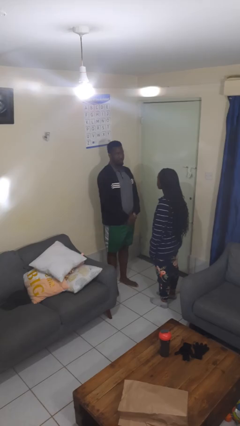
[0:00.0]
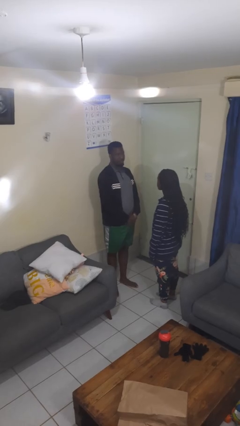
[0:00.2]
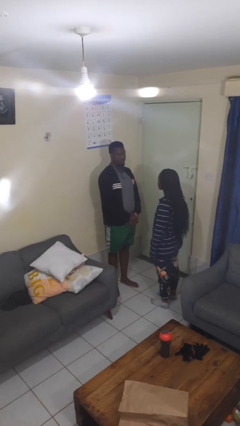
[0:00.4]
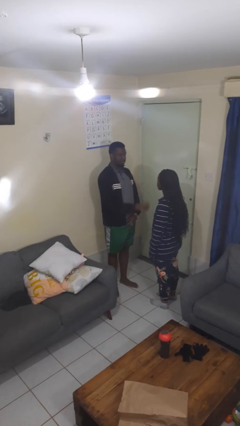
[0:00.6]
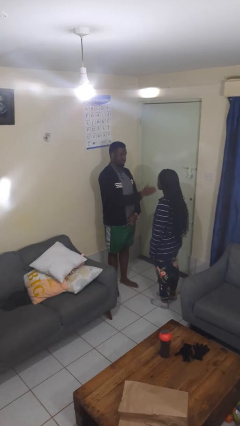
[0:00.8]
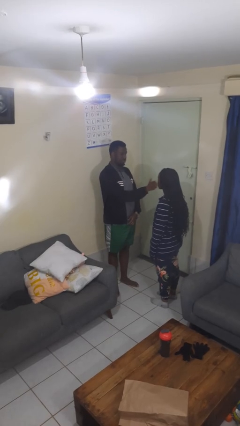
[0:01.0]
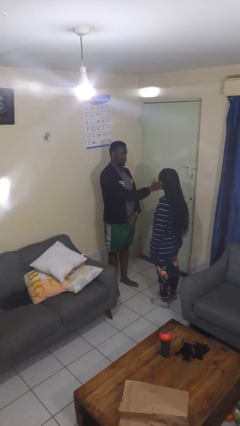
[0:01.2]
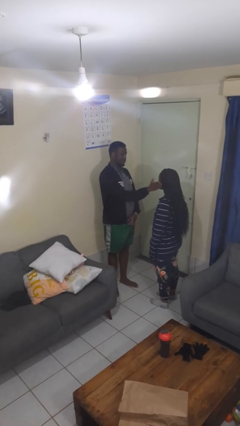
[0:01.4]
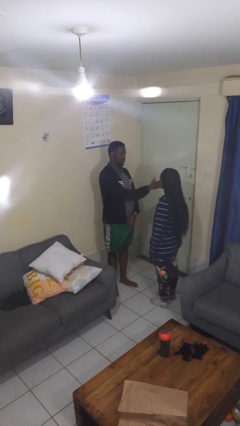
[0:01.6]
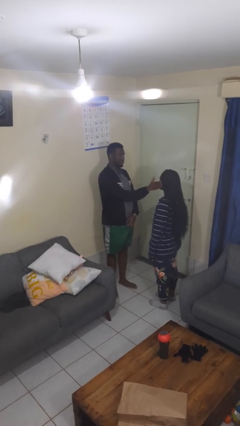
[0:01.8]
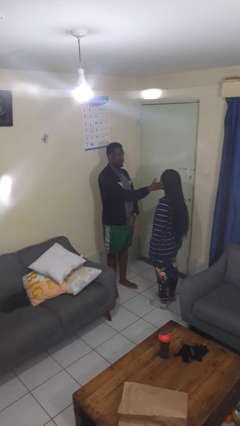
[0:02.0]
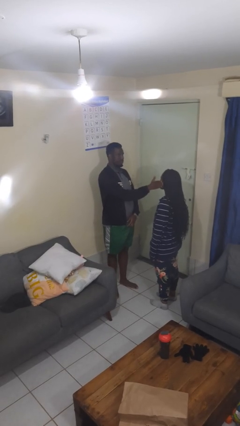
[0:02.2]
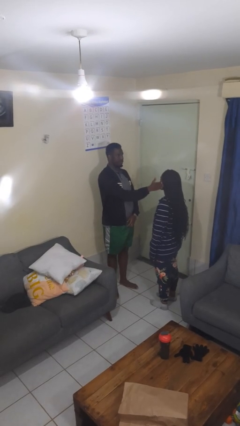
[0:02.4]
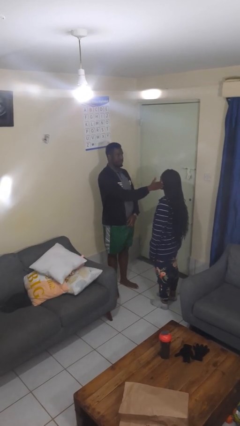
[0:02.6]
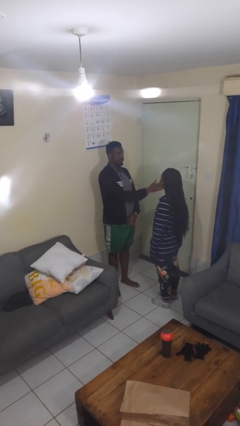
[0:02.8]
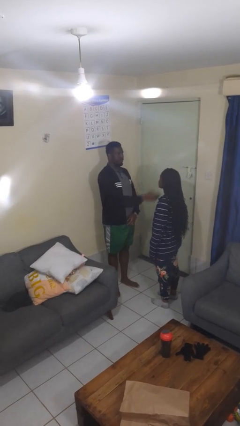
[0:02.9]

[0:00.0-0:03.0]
person touches face of person

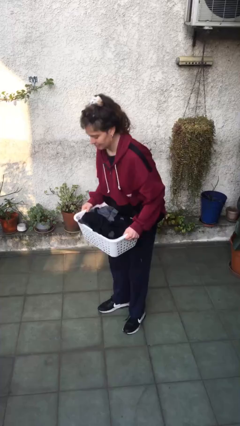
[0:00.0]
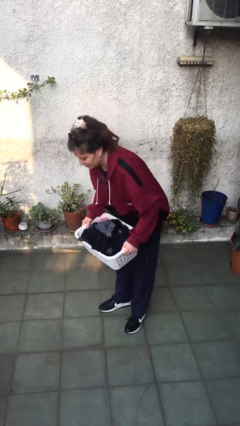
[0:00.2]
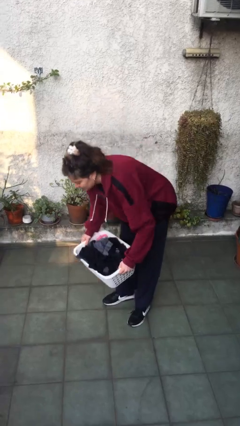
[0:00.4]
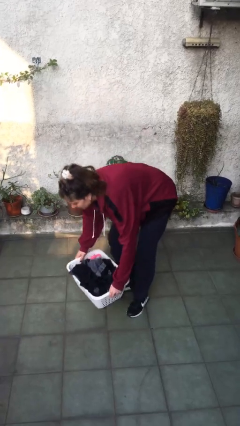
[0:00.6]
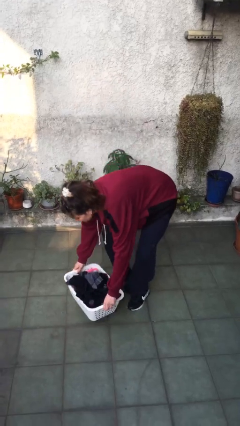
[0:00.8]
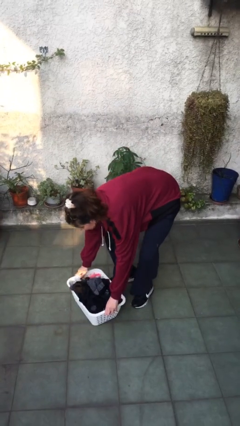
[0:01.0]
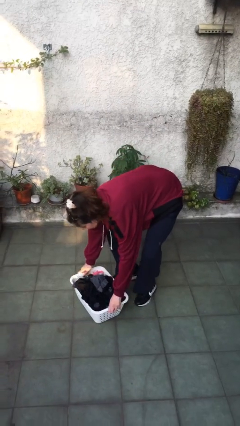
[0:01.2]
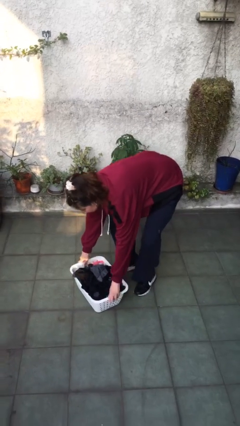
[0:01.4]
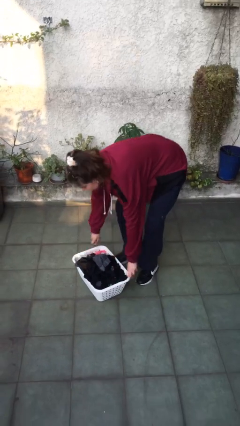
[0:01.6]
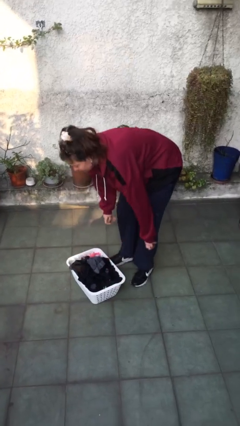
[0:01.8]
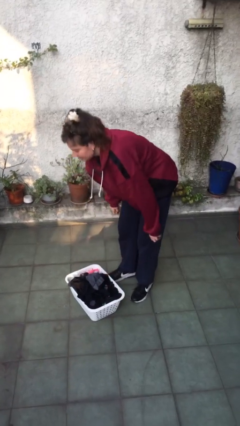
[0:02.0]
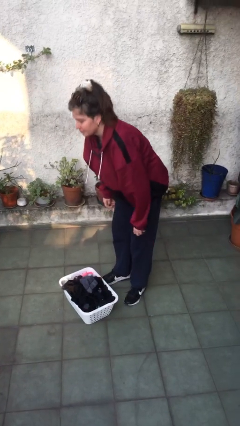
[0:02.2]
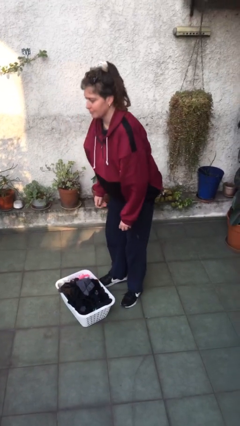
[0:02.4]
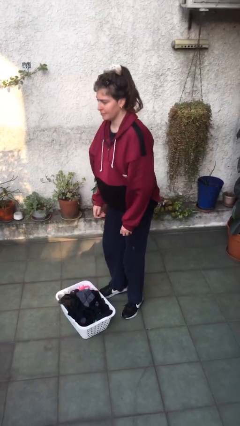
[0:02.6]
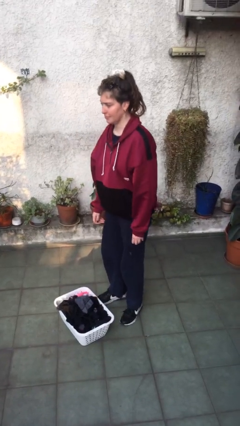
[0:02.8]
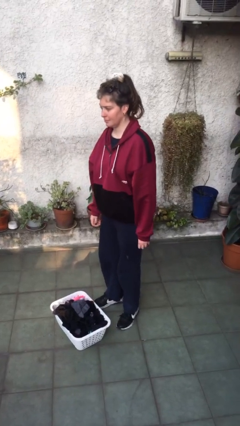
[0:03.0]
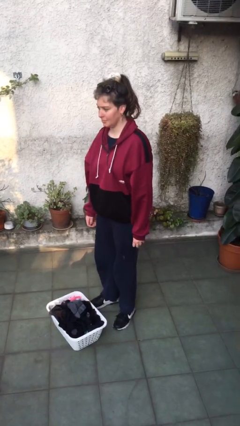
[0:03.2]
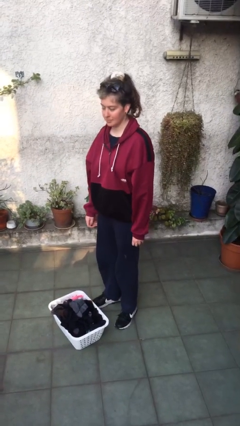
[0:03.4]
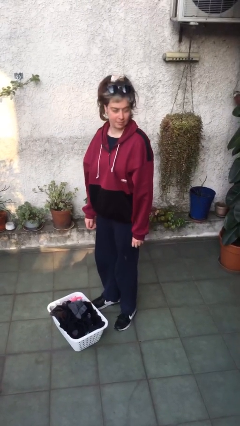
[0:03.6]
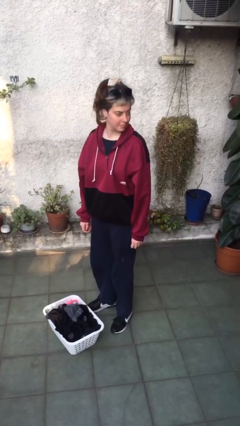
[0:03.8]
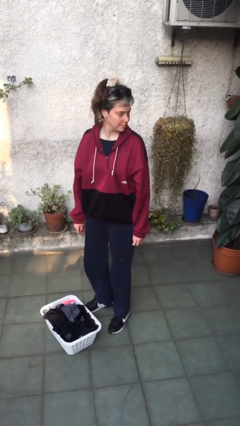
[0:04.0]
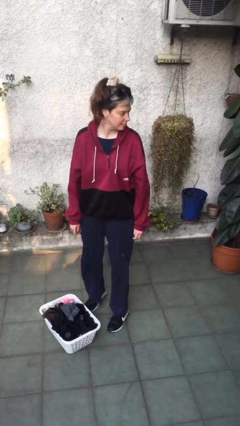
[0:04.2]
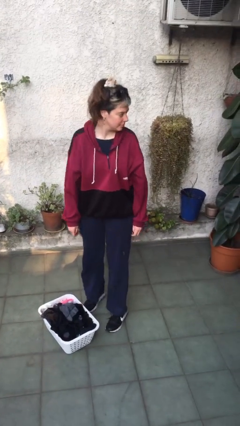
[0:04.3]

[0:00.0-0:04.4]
person puts down object on floor

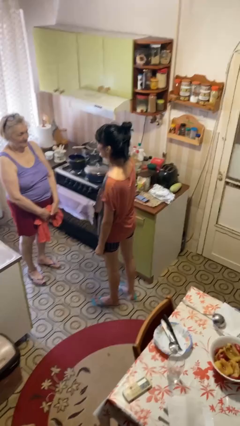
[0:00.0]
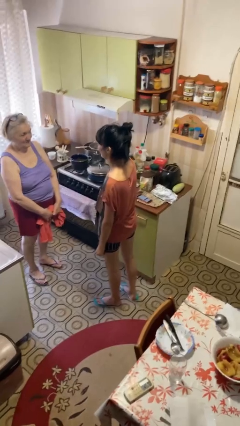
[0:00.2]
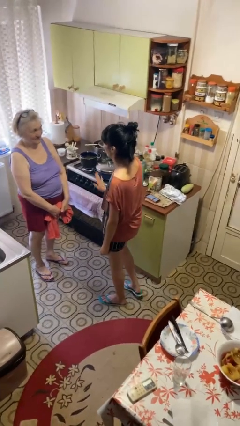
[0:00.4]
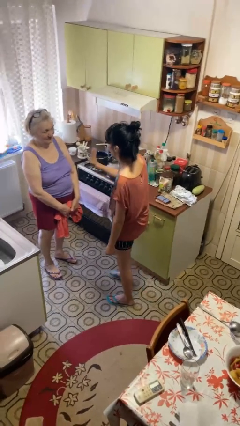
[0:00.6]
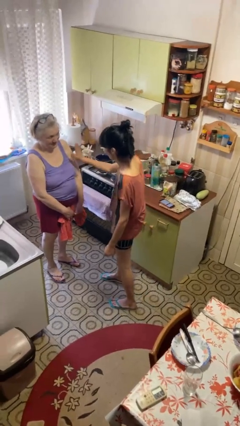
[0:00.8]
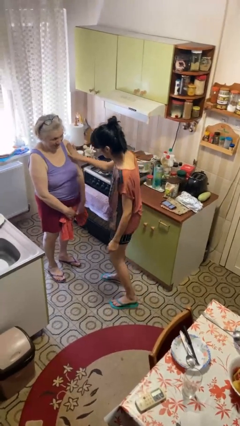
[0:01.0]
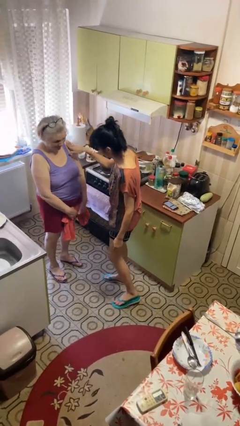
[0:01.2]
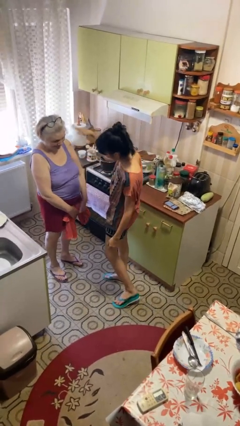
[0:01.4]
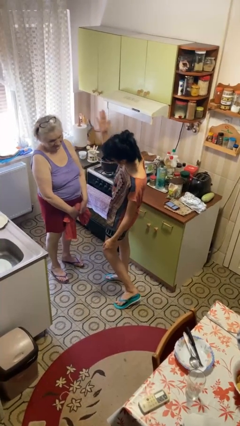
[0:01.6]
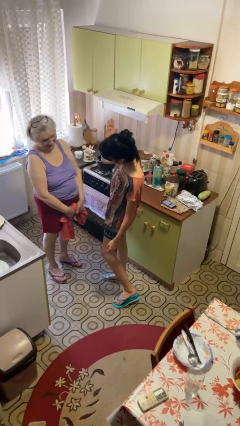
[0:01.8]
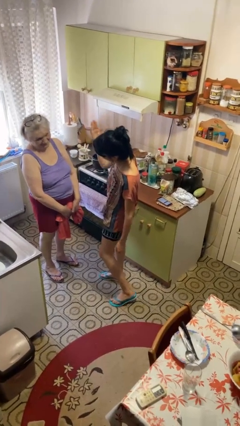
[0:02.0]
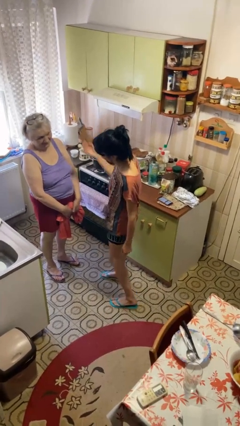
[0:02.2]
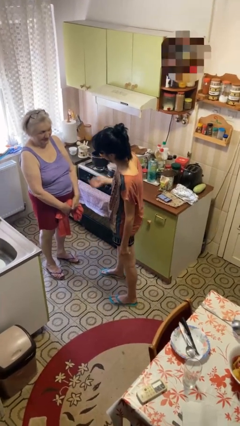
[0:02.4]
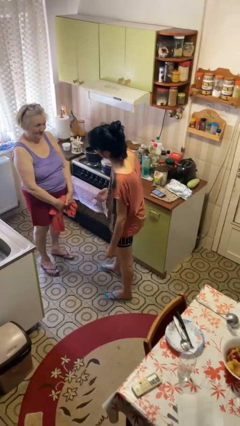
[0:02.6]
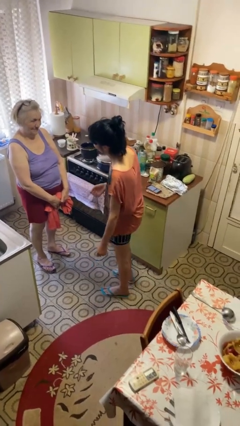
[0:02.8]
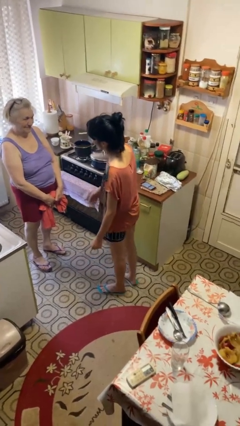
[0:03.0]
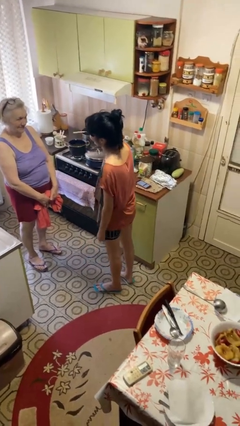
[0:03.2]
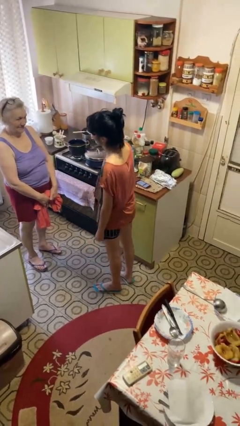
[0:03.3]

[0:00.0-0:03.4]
person shoves person

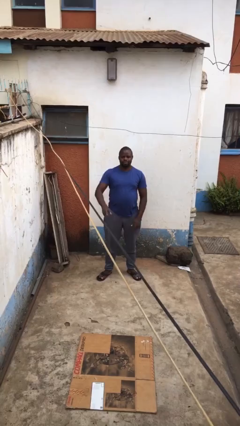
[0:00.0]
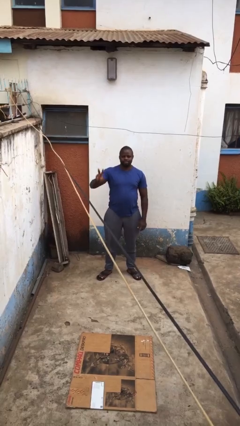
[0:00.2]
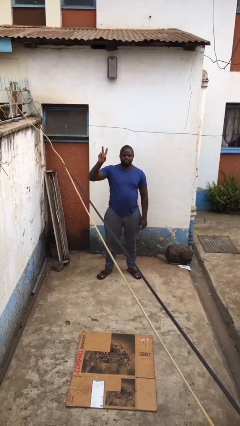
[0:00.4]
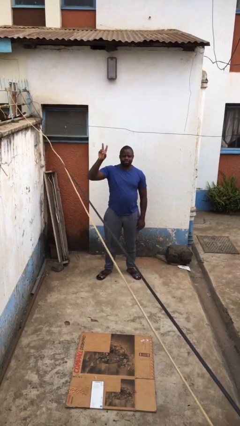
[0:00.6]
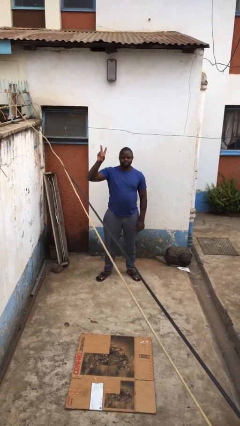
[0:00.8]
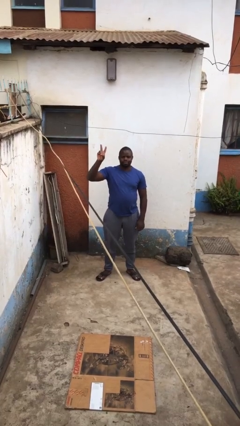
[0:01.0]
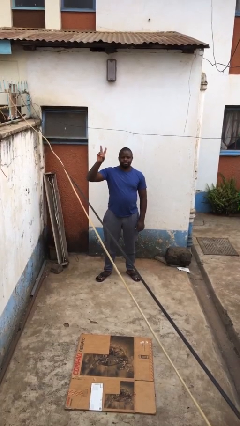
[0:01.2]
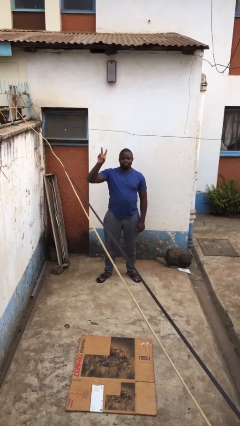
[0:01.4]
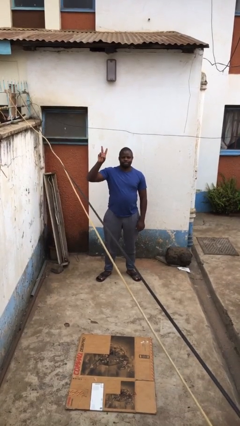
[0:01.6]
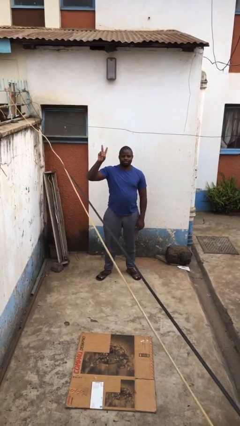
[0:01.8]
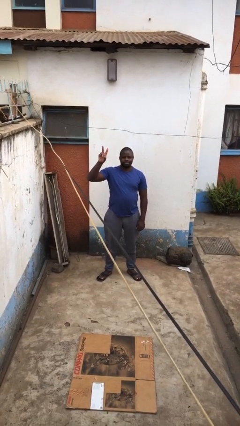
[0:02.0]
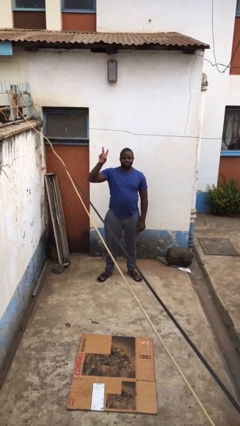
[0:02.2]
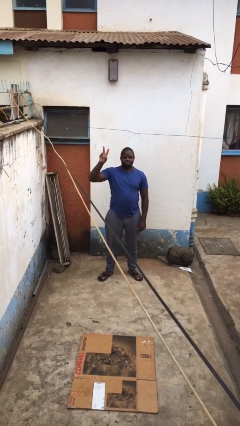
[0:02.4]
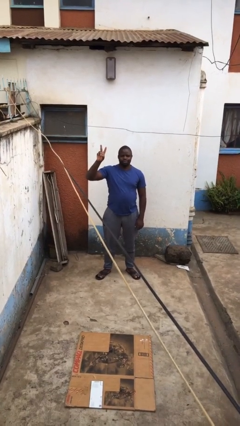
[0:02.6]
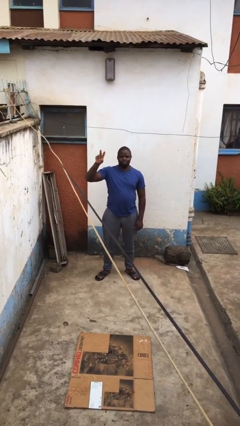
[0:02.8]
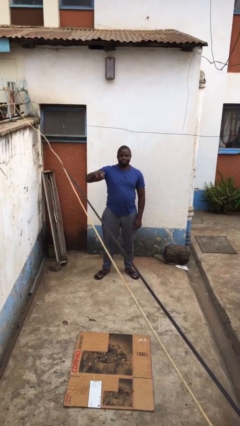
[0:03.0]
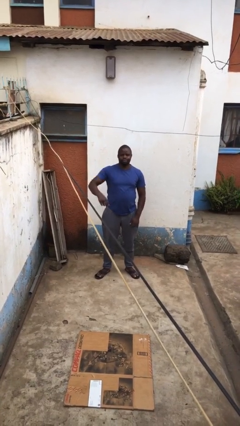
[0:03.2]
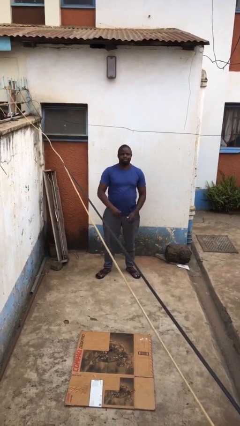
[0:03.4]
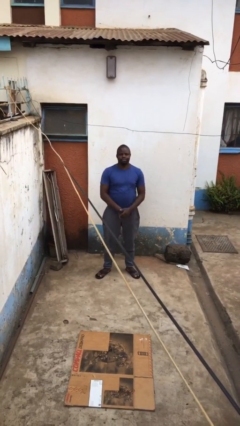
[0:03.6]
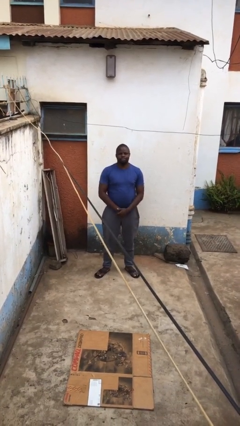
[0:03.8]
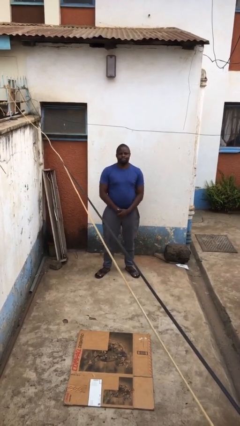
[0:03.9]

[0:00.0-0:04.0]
person gestures peace

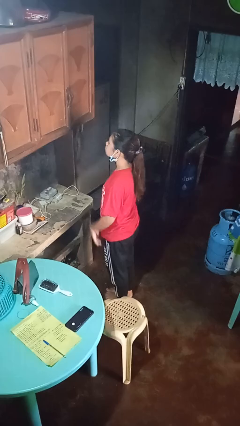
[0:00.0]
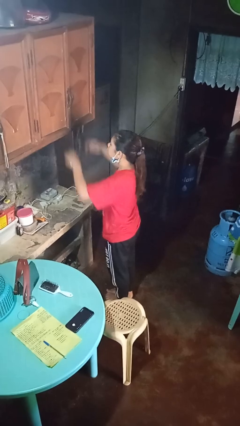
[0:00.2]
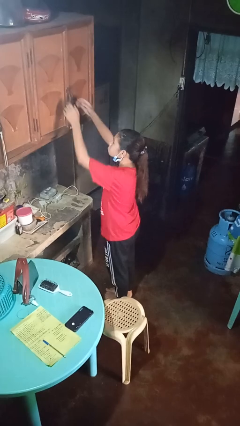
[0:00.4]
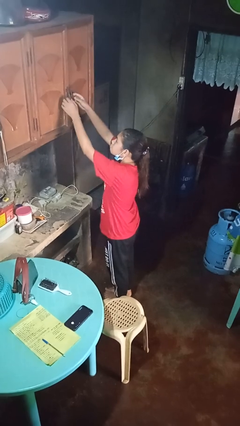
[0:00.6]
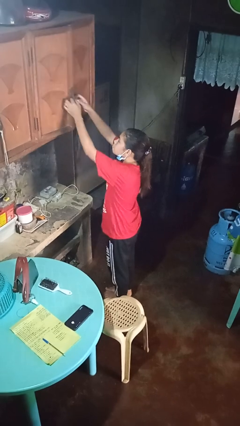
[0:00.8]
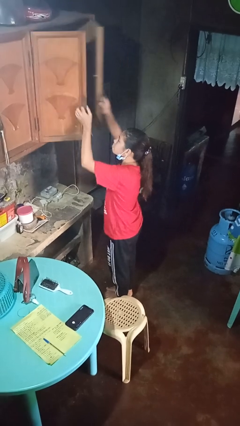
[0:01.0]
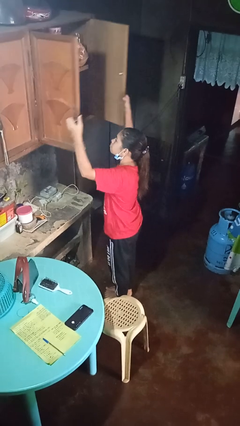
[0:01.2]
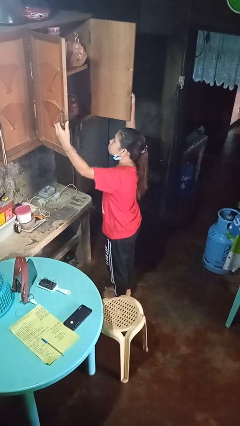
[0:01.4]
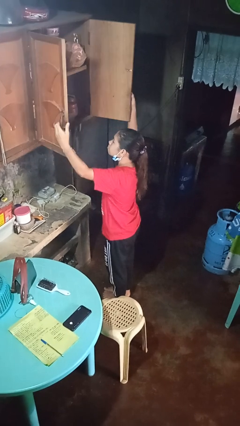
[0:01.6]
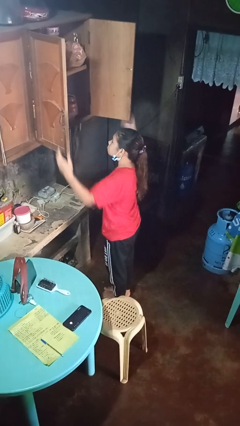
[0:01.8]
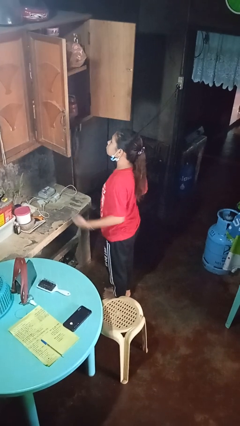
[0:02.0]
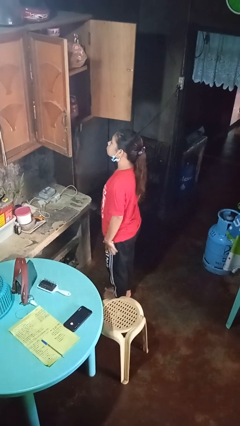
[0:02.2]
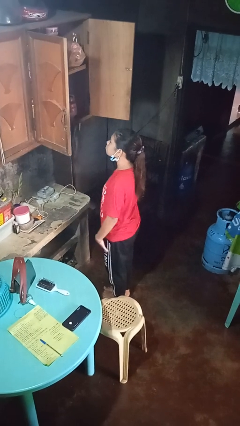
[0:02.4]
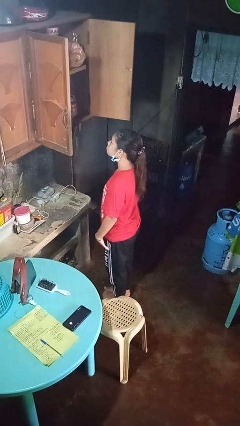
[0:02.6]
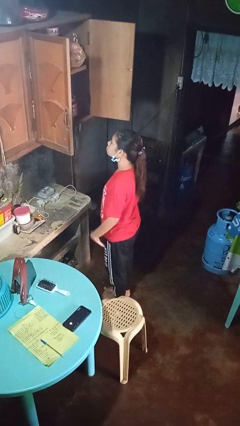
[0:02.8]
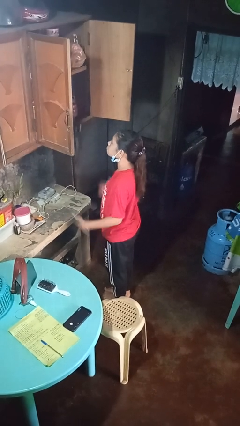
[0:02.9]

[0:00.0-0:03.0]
person opens cabinet
